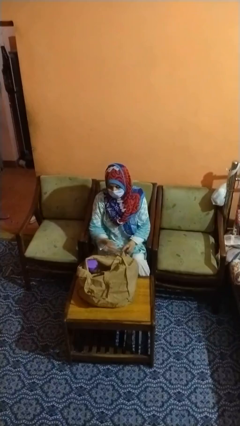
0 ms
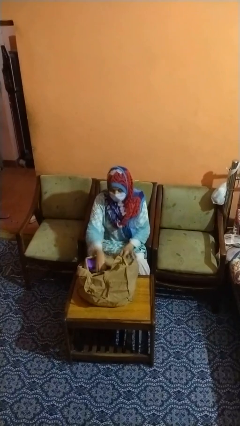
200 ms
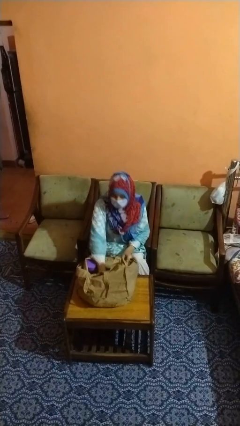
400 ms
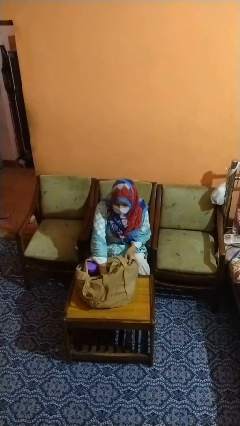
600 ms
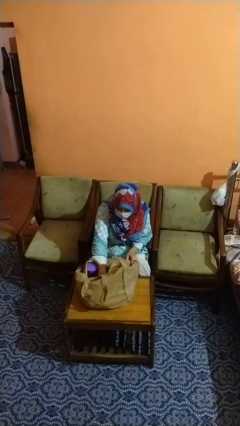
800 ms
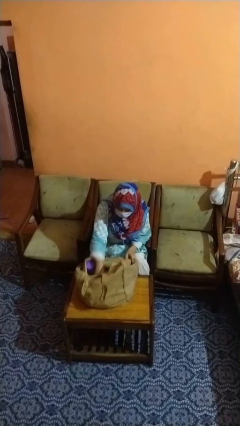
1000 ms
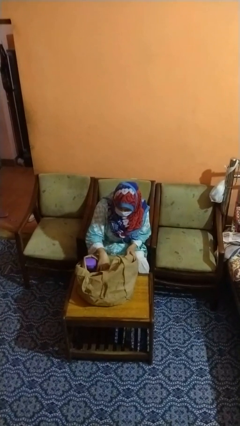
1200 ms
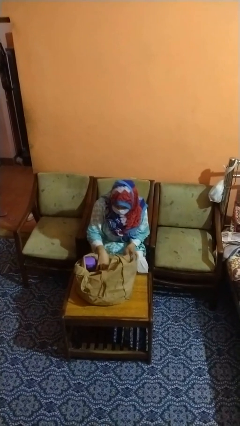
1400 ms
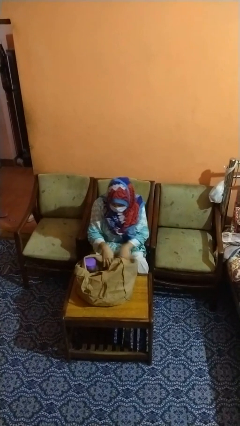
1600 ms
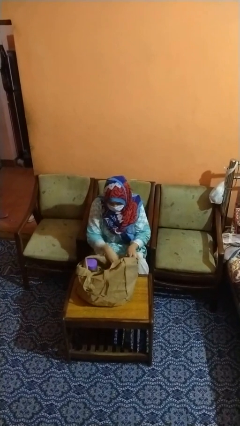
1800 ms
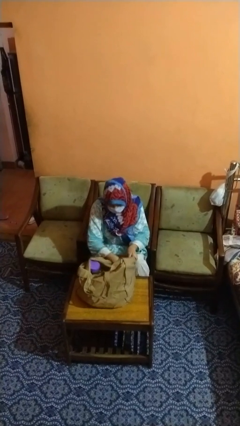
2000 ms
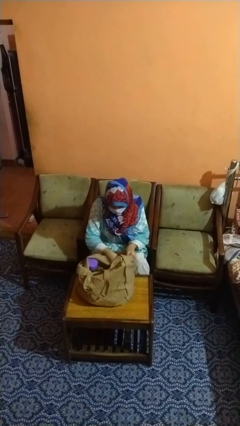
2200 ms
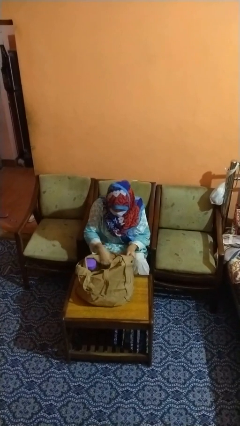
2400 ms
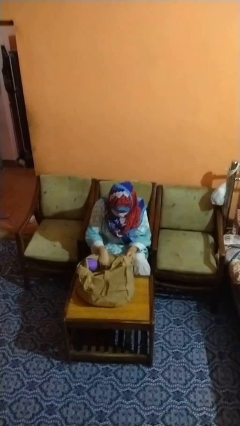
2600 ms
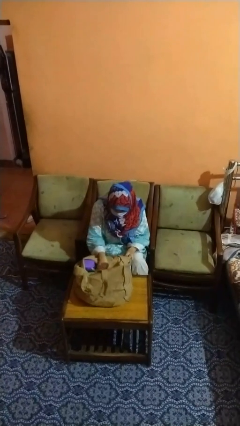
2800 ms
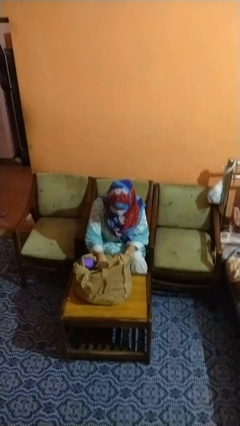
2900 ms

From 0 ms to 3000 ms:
person searches in bag

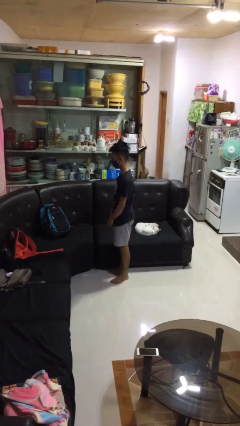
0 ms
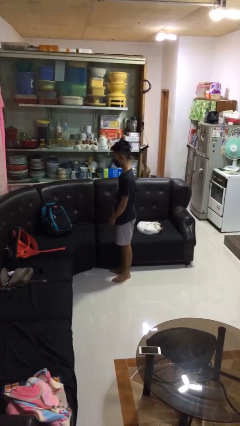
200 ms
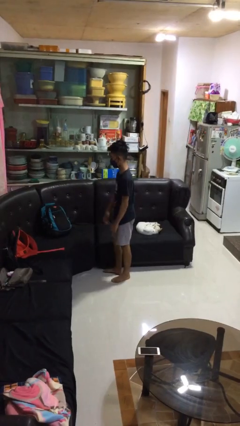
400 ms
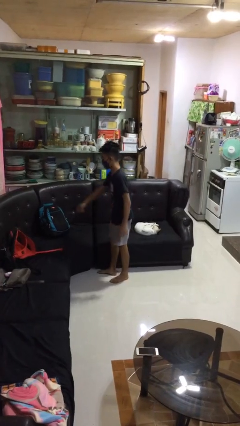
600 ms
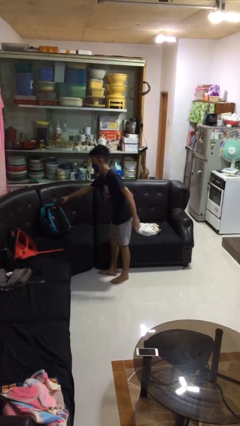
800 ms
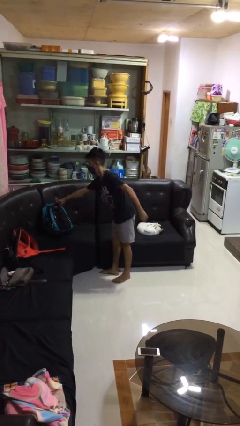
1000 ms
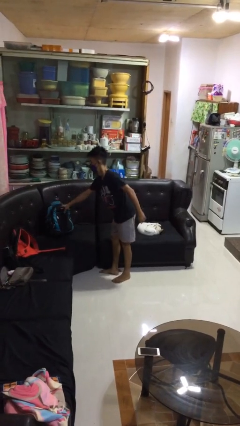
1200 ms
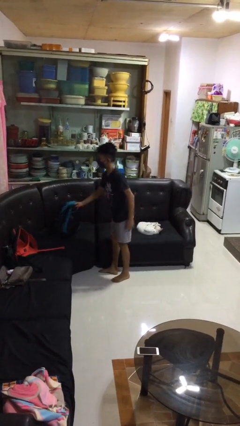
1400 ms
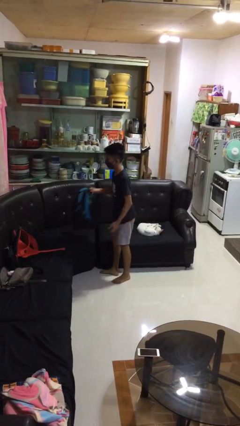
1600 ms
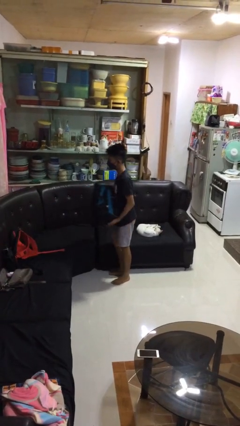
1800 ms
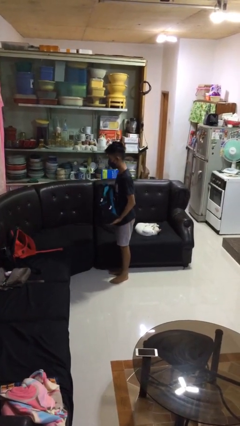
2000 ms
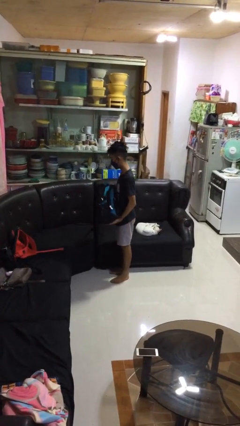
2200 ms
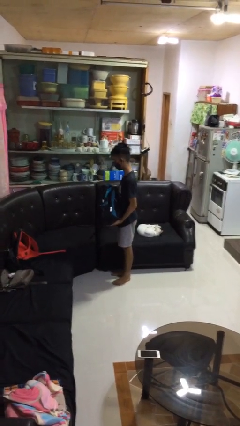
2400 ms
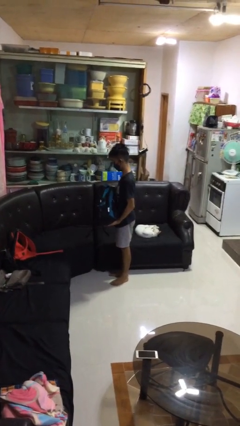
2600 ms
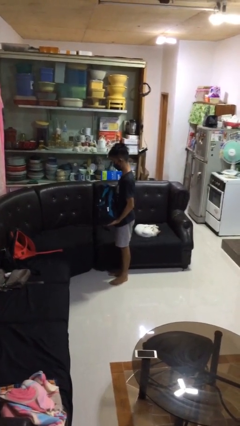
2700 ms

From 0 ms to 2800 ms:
person picks up object from couch

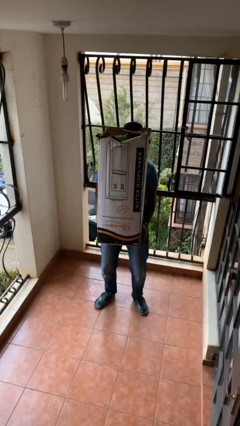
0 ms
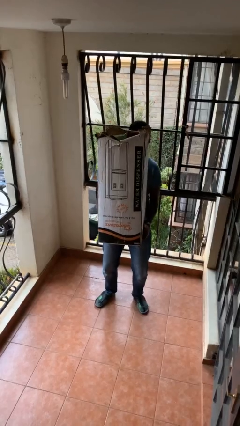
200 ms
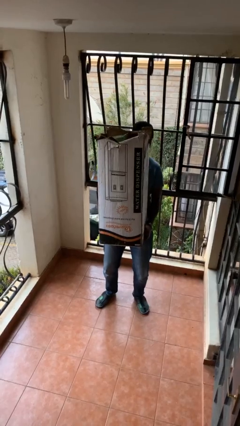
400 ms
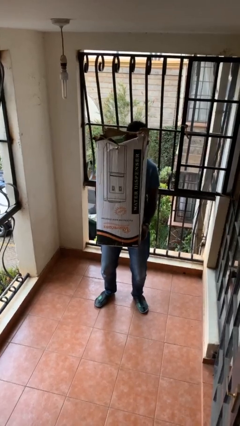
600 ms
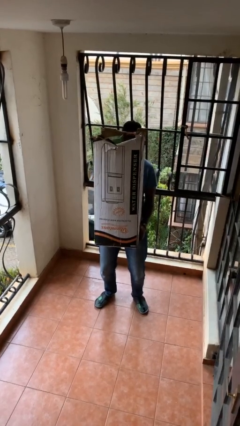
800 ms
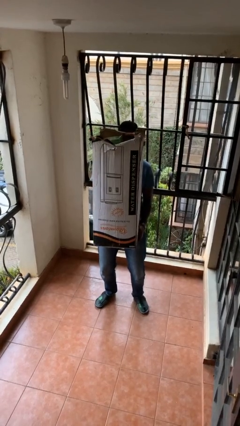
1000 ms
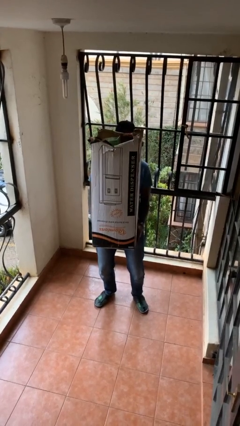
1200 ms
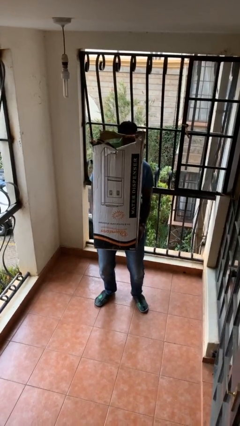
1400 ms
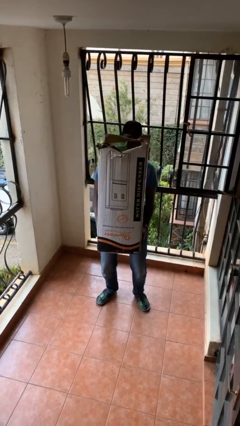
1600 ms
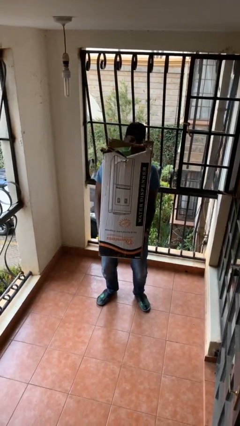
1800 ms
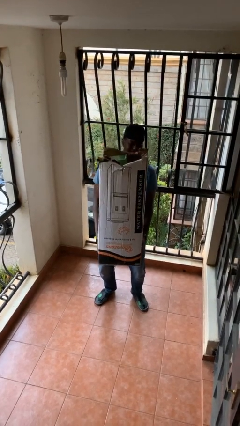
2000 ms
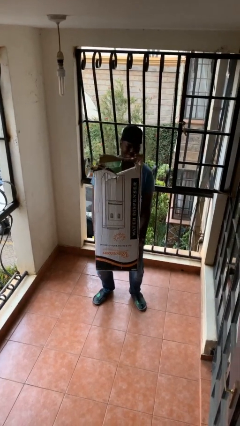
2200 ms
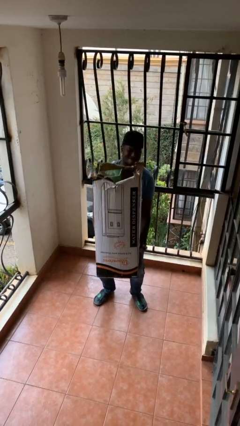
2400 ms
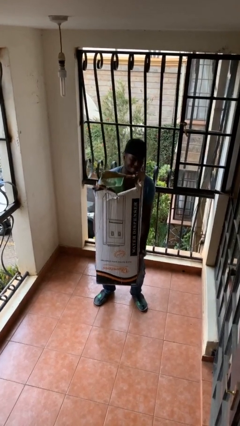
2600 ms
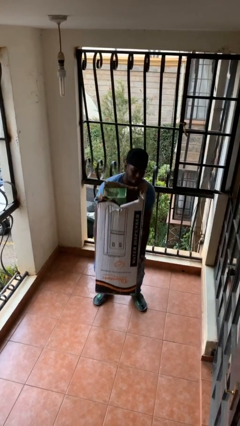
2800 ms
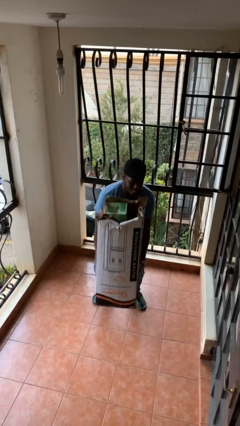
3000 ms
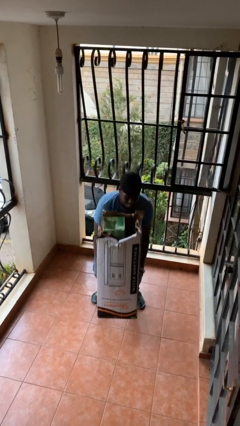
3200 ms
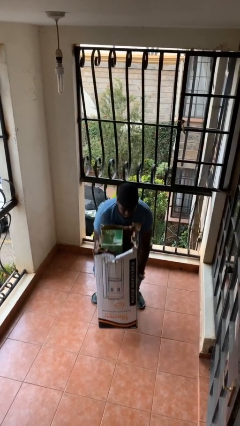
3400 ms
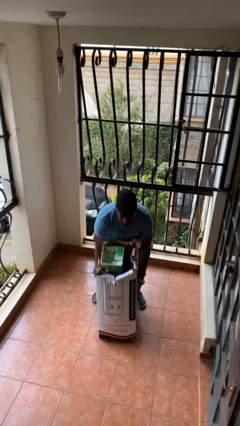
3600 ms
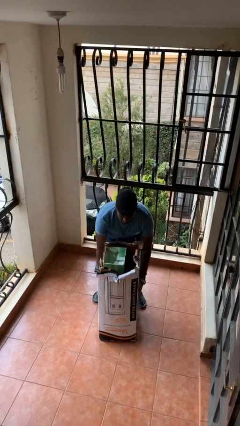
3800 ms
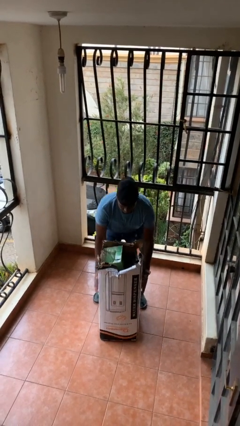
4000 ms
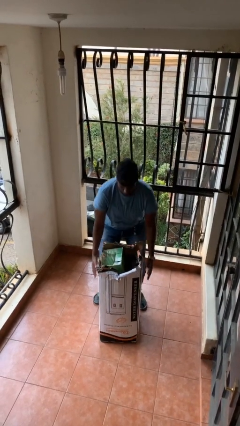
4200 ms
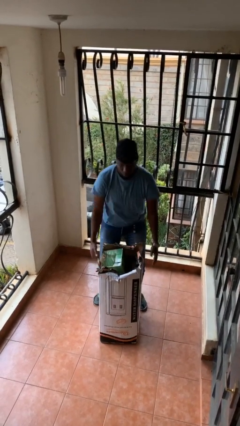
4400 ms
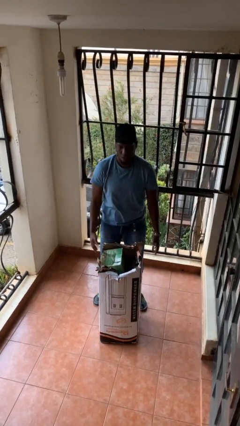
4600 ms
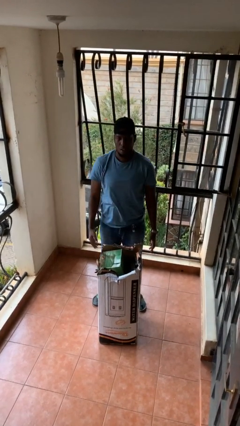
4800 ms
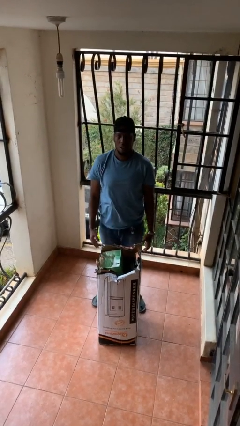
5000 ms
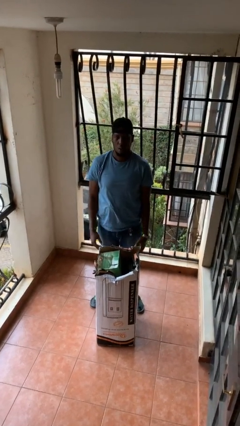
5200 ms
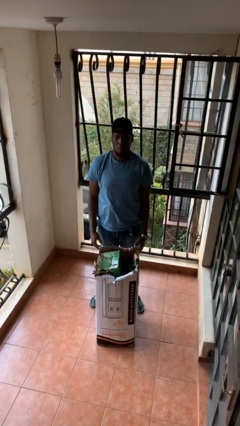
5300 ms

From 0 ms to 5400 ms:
person puts down object on floor

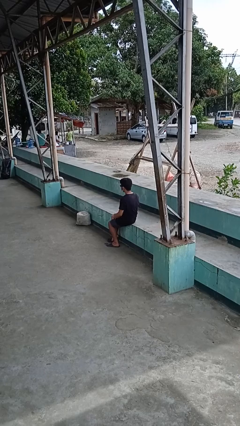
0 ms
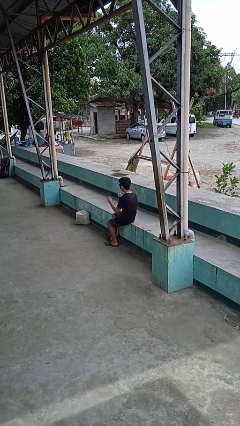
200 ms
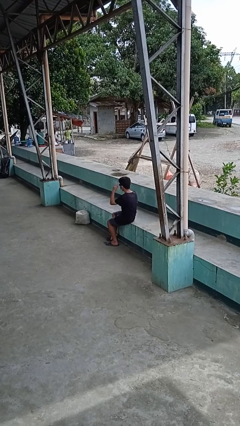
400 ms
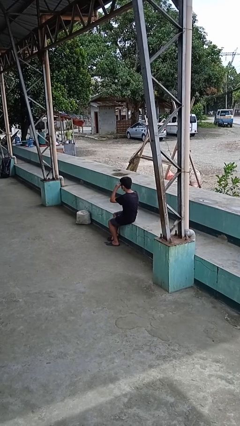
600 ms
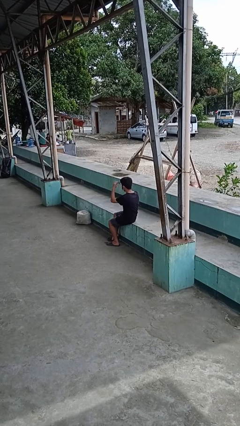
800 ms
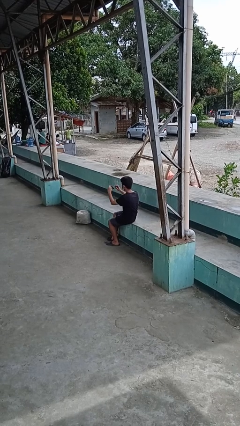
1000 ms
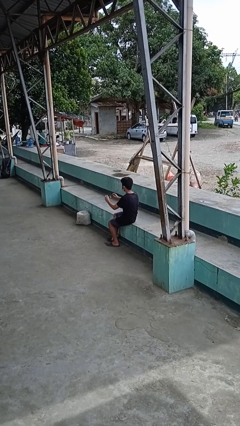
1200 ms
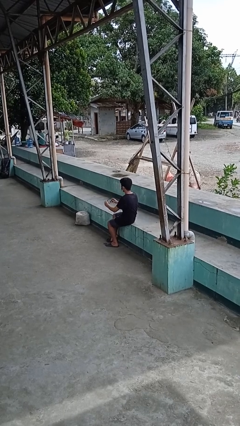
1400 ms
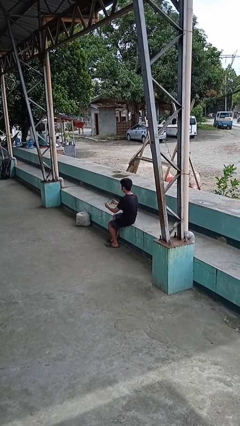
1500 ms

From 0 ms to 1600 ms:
person takes off sunglasses

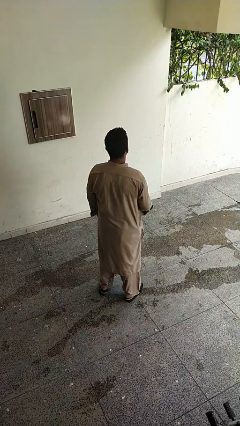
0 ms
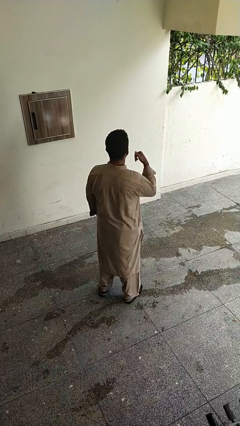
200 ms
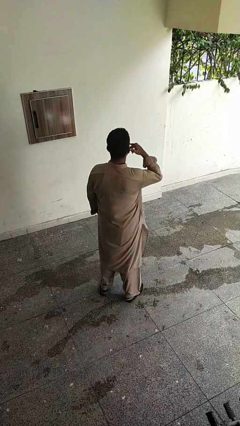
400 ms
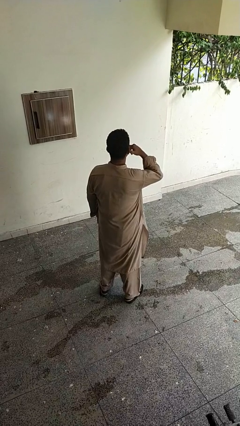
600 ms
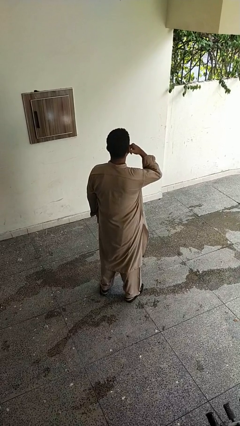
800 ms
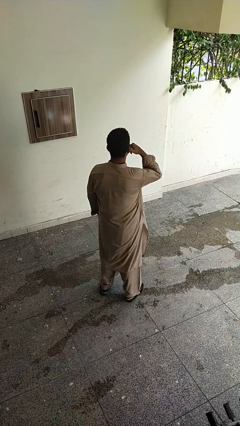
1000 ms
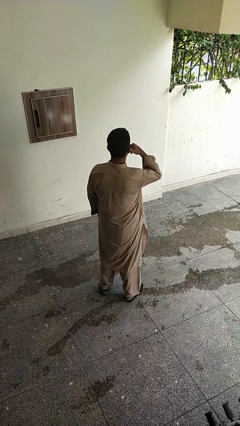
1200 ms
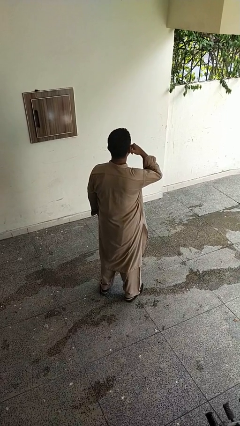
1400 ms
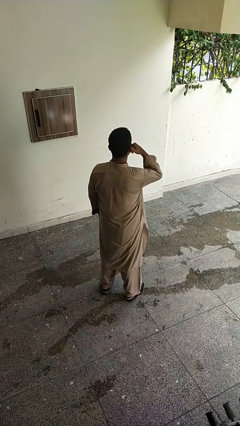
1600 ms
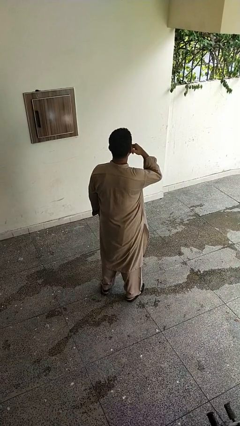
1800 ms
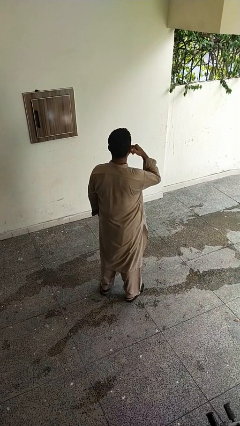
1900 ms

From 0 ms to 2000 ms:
person gestures call me

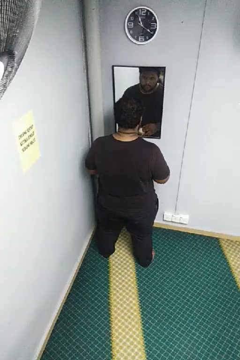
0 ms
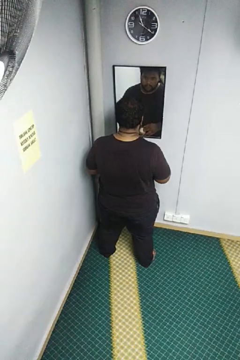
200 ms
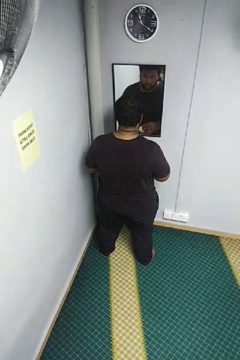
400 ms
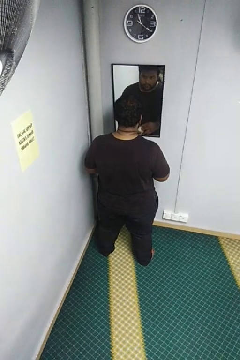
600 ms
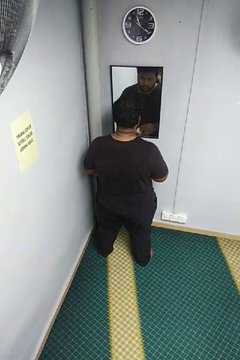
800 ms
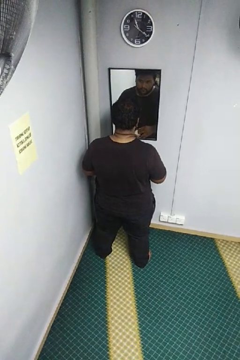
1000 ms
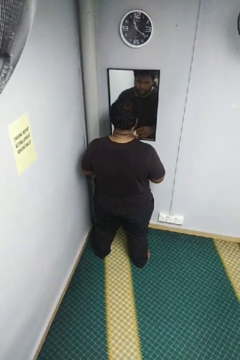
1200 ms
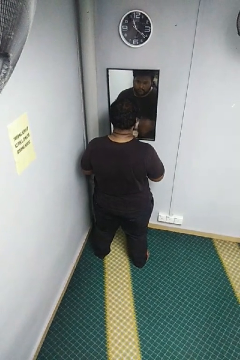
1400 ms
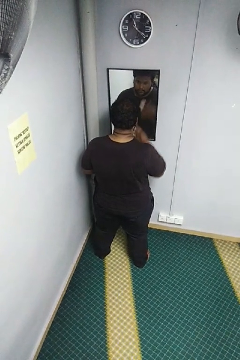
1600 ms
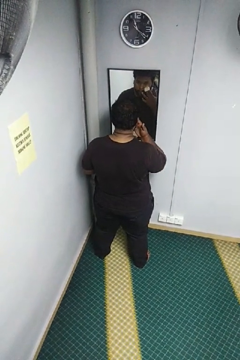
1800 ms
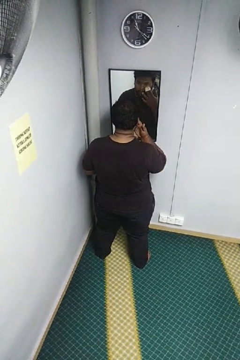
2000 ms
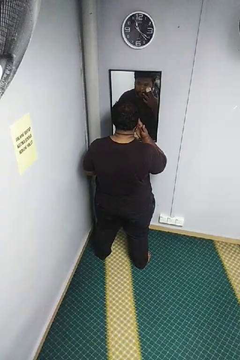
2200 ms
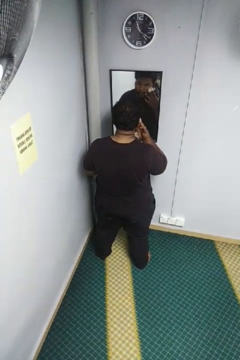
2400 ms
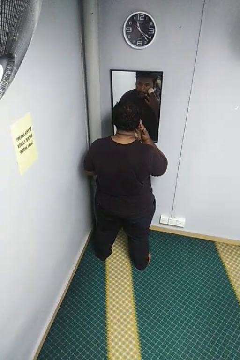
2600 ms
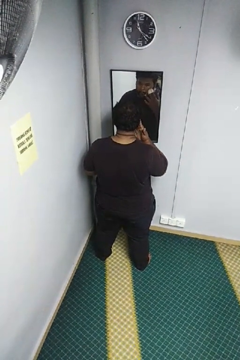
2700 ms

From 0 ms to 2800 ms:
person applies foundation makeup
